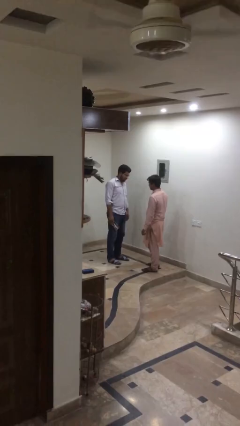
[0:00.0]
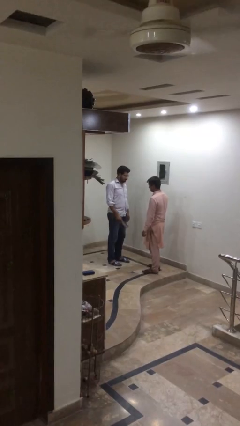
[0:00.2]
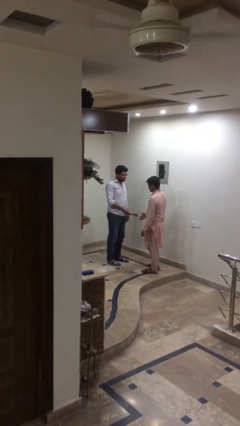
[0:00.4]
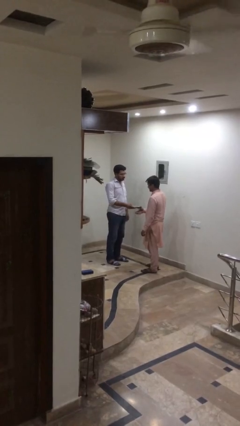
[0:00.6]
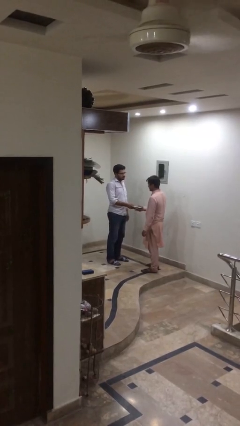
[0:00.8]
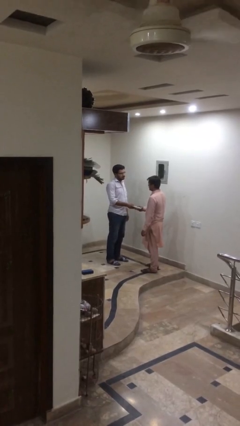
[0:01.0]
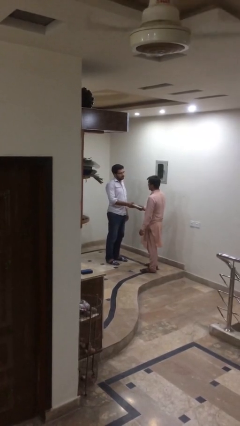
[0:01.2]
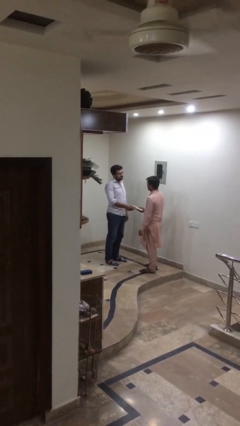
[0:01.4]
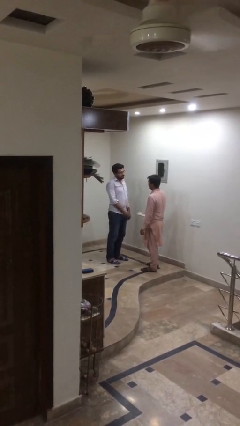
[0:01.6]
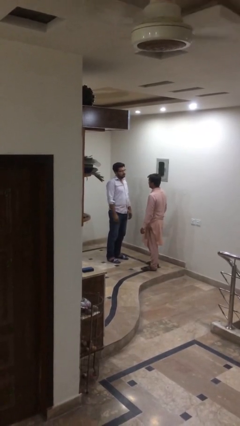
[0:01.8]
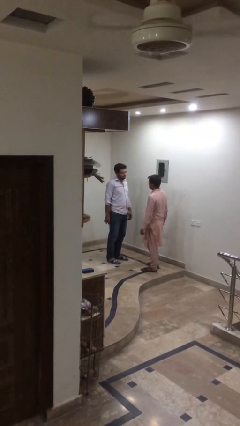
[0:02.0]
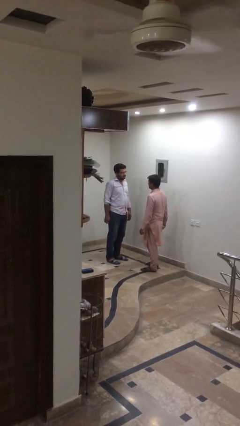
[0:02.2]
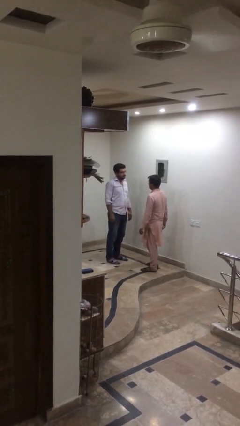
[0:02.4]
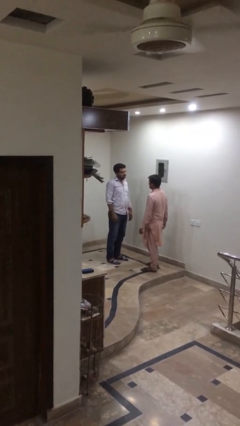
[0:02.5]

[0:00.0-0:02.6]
person transfers object to person

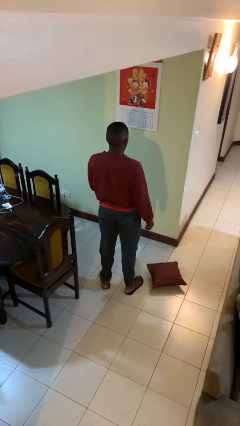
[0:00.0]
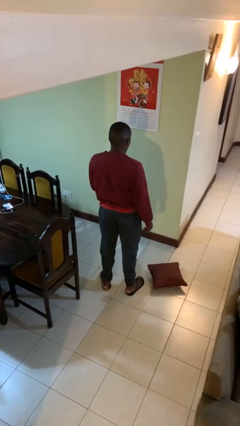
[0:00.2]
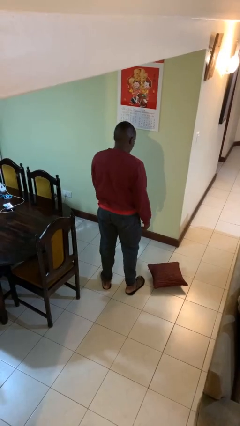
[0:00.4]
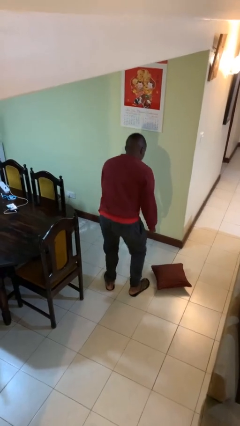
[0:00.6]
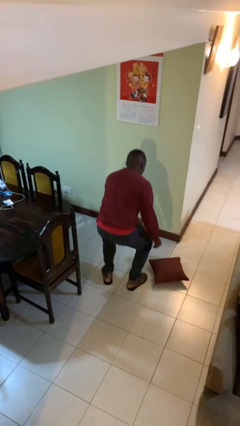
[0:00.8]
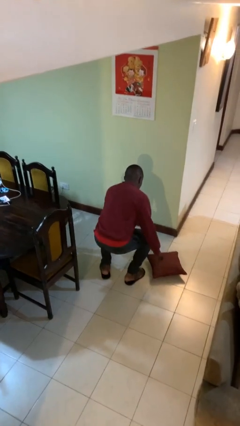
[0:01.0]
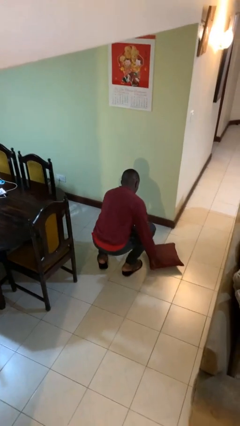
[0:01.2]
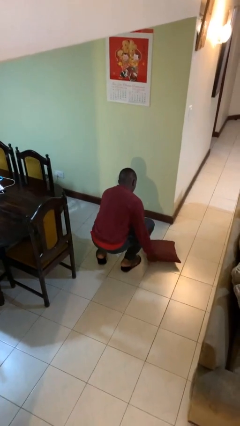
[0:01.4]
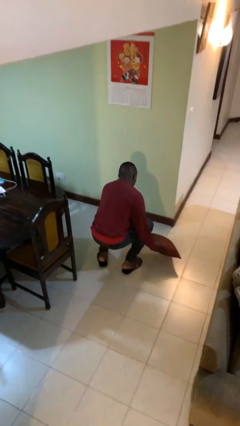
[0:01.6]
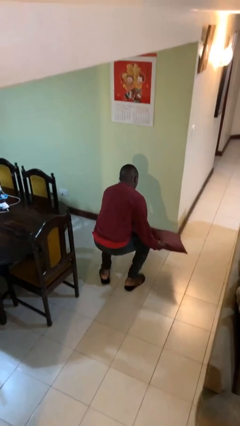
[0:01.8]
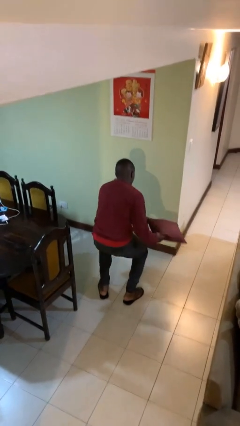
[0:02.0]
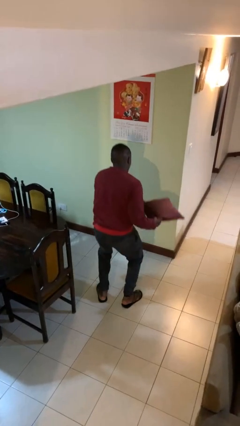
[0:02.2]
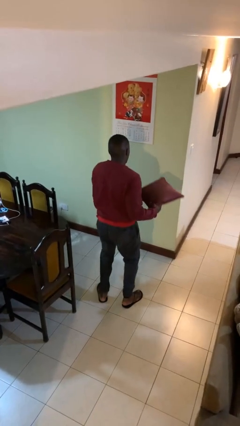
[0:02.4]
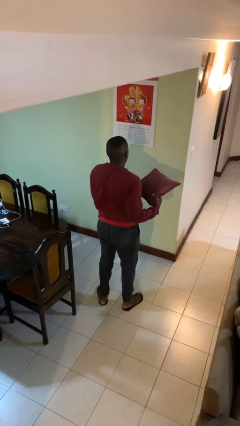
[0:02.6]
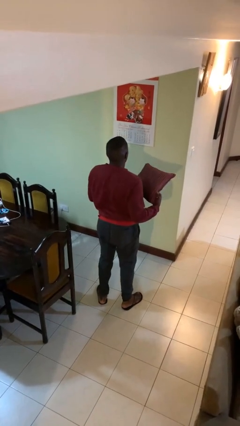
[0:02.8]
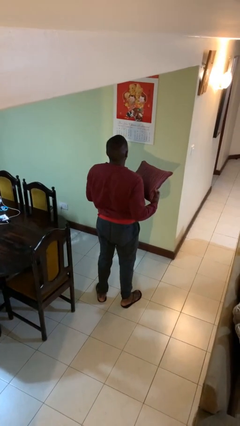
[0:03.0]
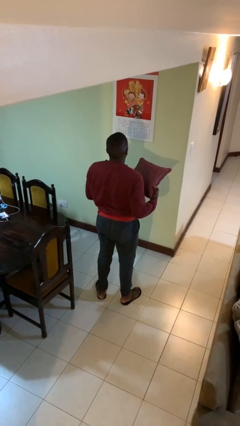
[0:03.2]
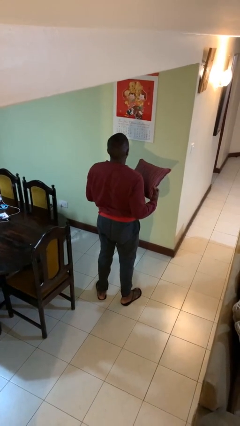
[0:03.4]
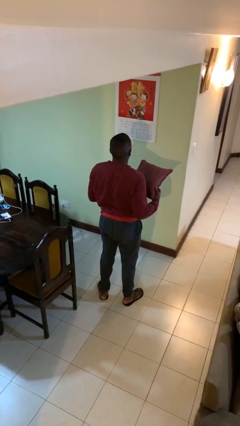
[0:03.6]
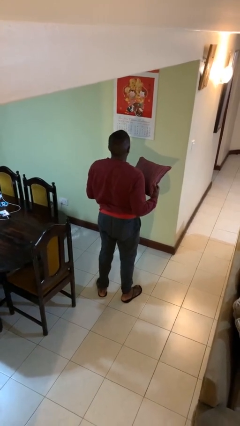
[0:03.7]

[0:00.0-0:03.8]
person picks up object from floor

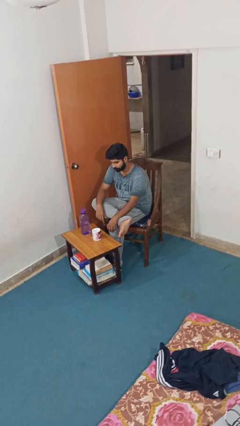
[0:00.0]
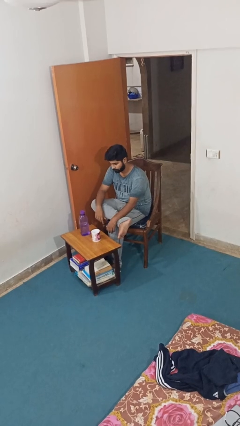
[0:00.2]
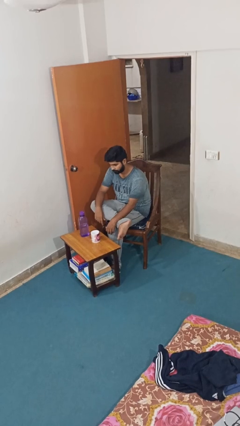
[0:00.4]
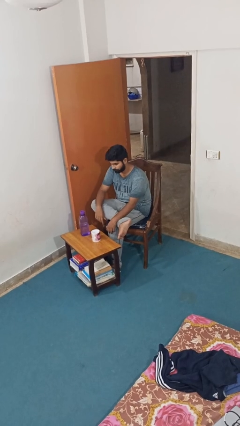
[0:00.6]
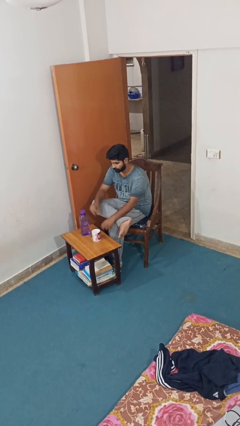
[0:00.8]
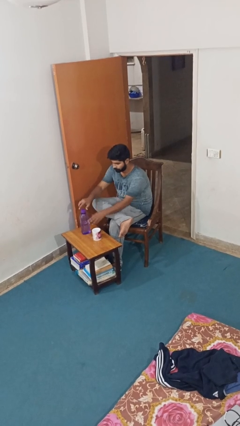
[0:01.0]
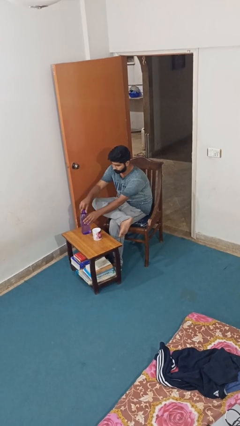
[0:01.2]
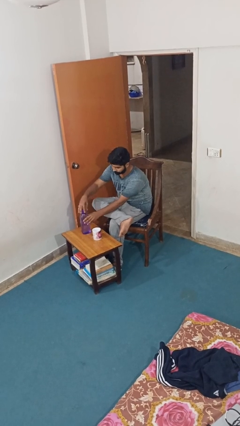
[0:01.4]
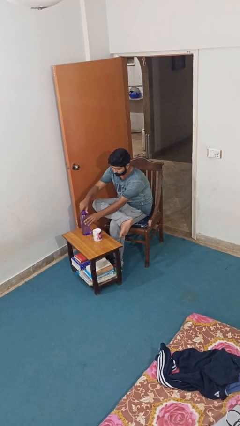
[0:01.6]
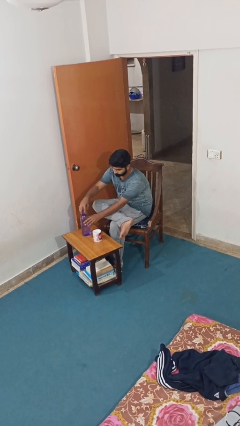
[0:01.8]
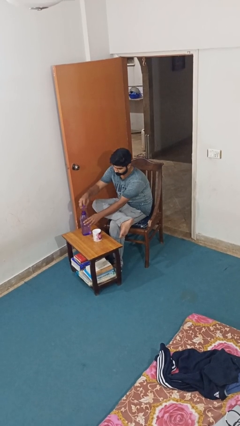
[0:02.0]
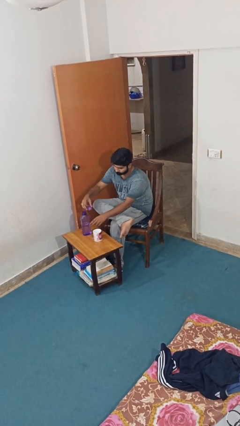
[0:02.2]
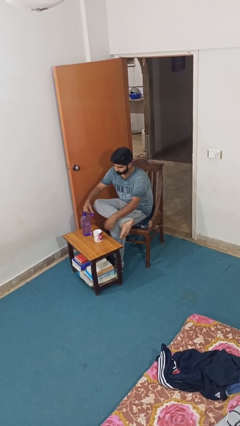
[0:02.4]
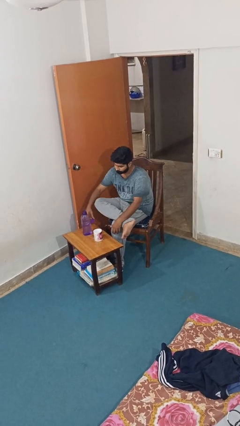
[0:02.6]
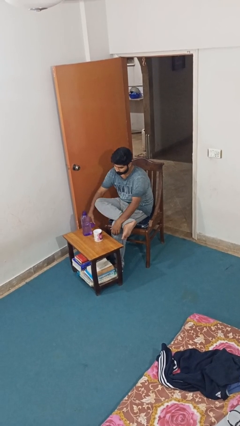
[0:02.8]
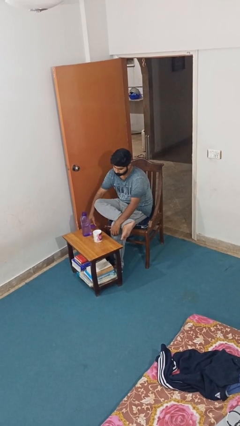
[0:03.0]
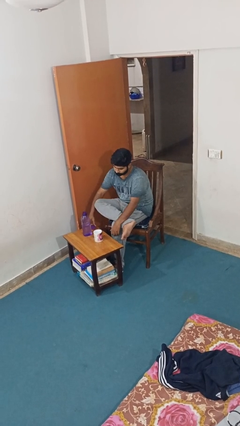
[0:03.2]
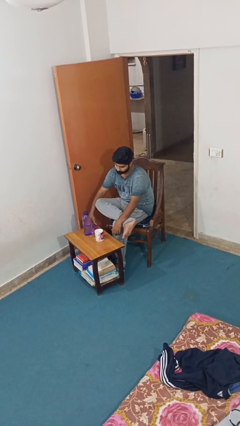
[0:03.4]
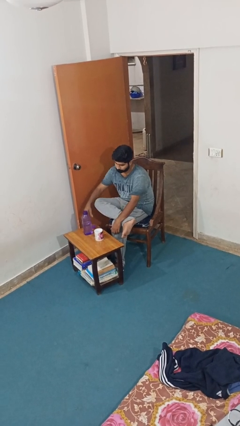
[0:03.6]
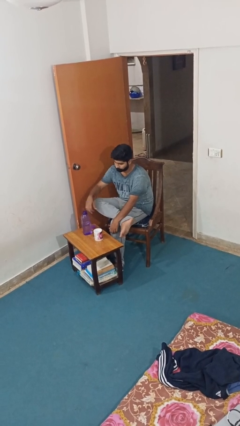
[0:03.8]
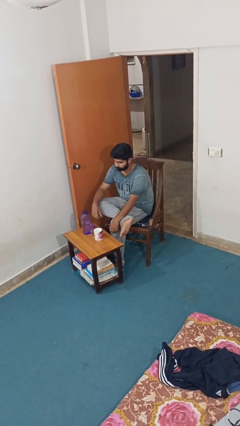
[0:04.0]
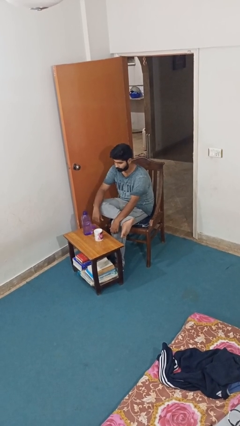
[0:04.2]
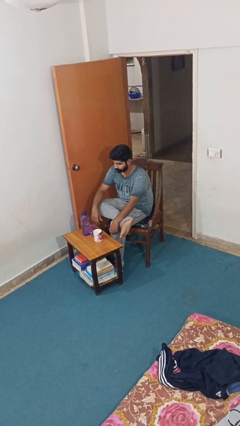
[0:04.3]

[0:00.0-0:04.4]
person unscrews lid from bottle

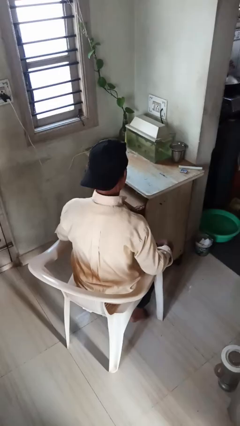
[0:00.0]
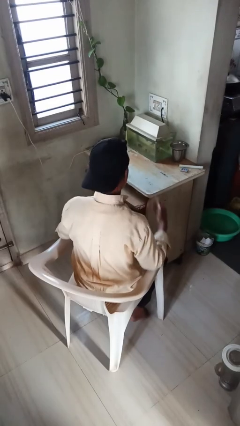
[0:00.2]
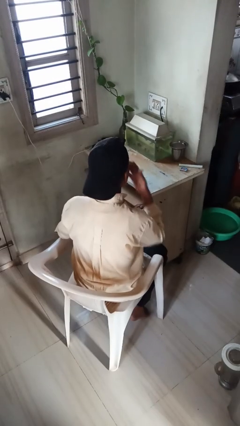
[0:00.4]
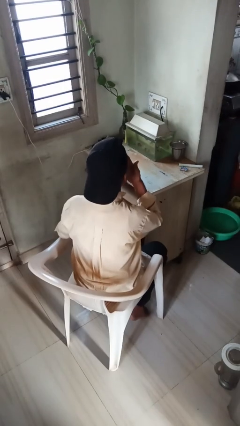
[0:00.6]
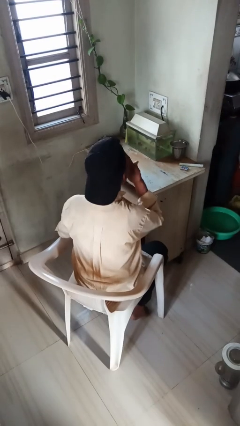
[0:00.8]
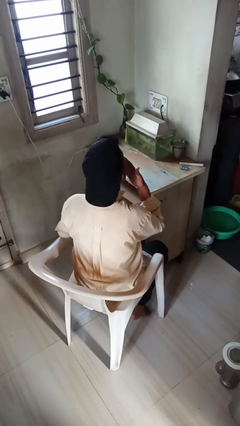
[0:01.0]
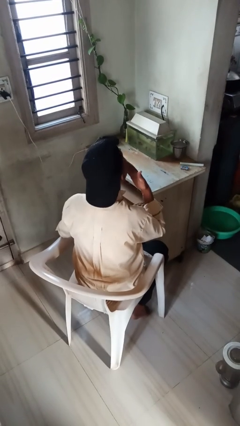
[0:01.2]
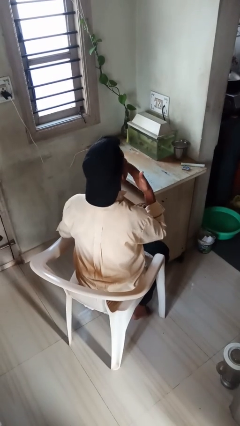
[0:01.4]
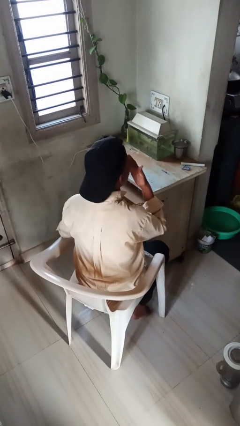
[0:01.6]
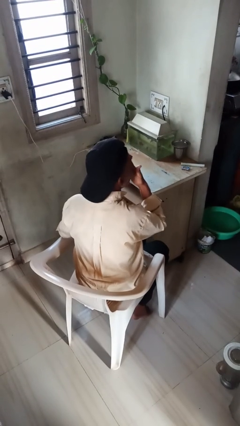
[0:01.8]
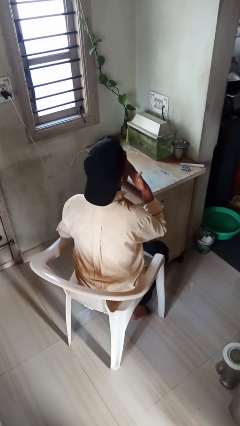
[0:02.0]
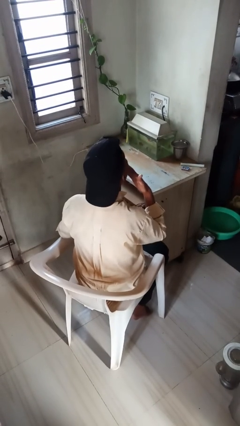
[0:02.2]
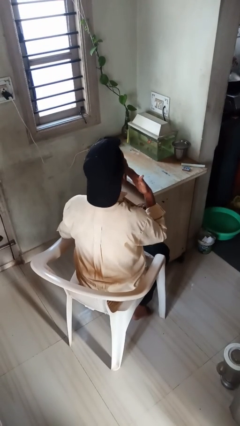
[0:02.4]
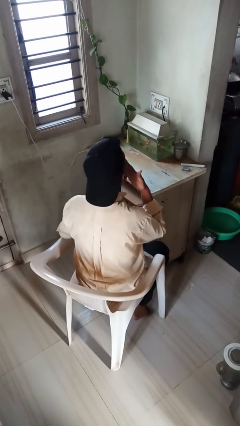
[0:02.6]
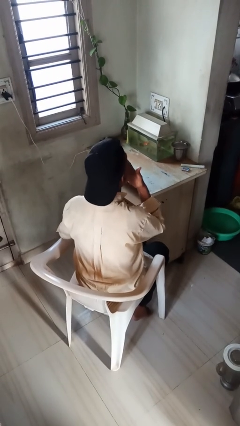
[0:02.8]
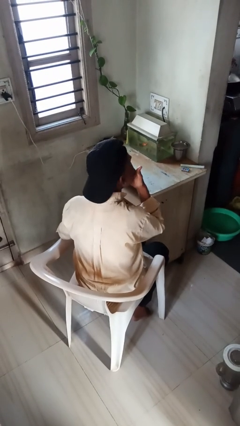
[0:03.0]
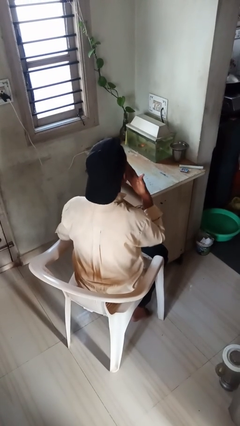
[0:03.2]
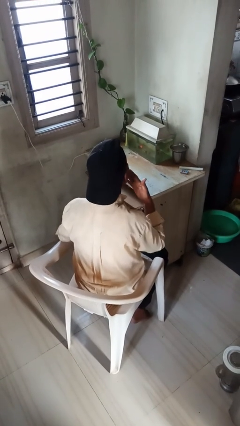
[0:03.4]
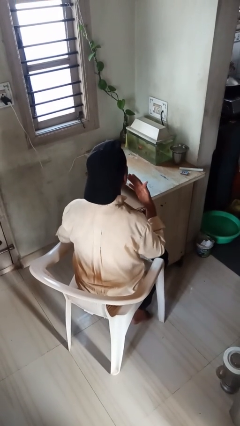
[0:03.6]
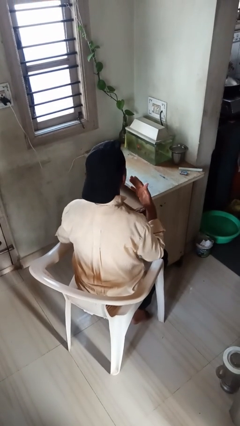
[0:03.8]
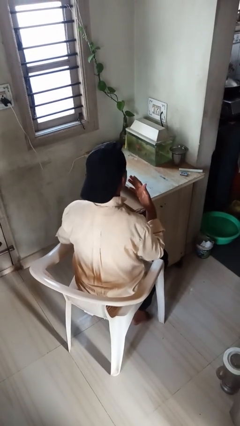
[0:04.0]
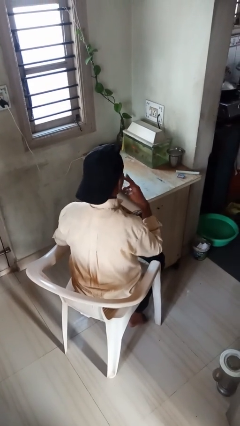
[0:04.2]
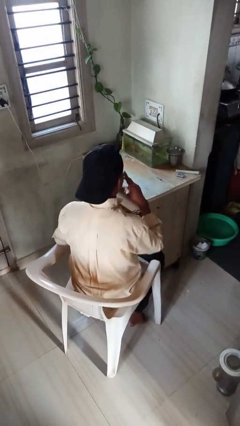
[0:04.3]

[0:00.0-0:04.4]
person licks fingers

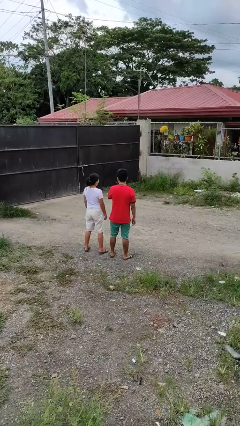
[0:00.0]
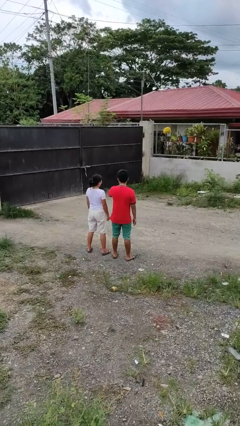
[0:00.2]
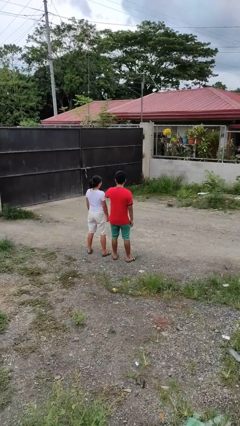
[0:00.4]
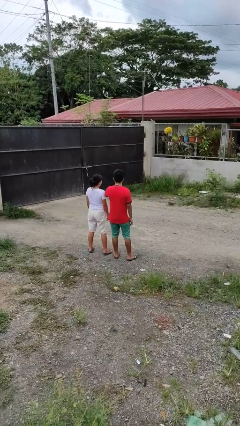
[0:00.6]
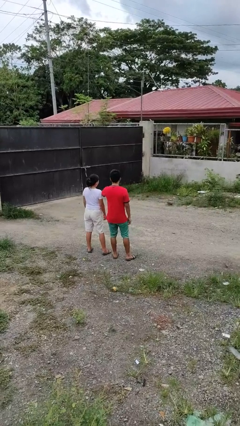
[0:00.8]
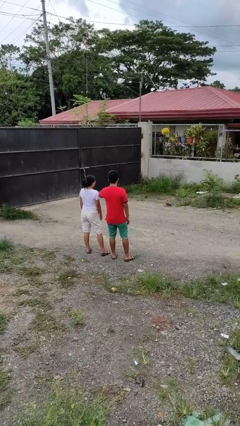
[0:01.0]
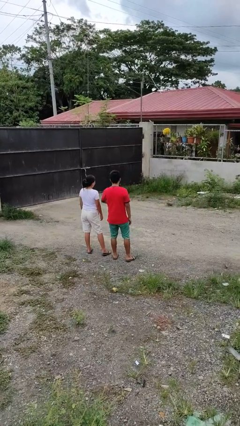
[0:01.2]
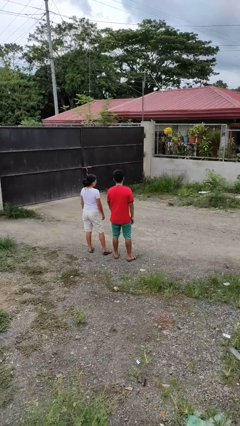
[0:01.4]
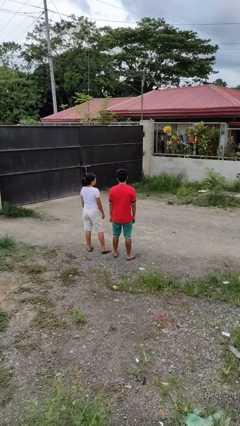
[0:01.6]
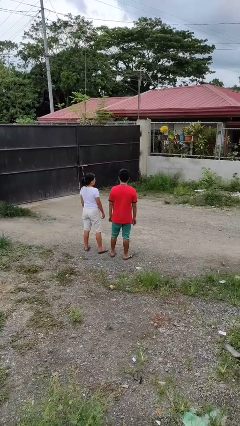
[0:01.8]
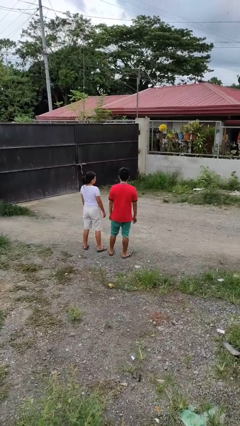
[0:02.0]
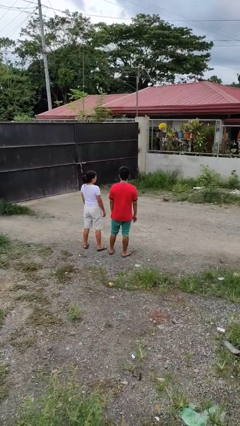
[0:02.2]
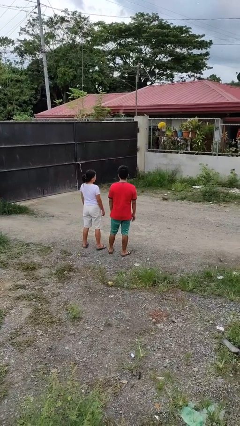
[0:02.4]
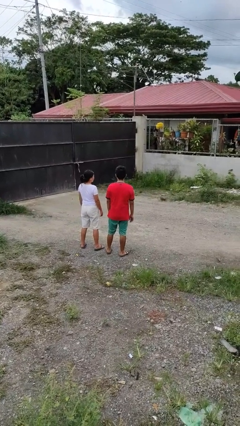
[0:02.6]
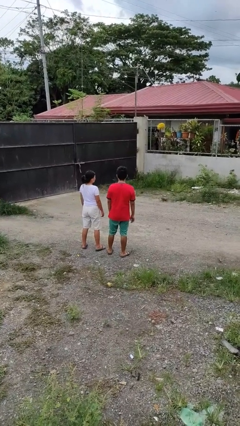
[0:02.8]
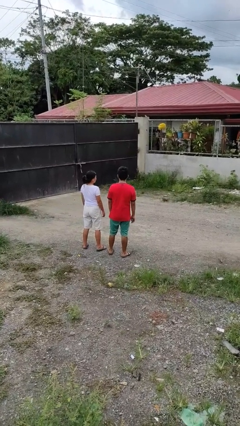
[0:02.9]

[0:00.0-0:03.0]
person nudges person with elbow
